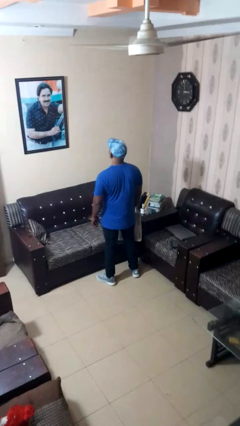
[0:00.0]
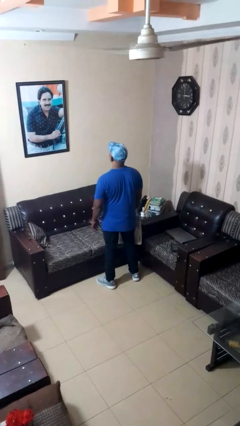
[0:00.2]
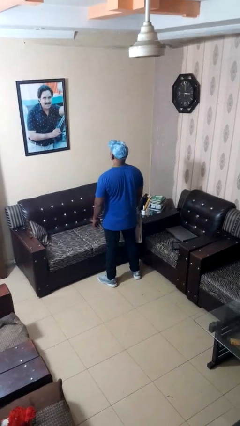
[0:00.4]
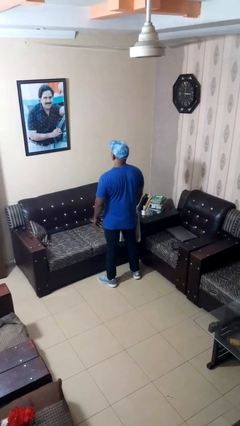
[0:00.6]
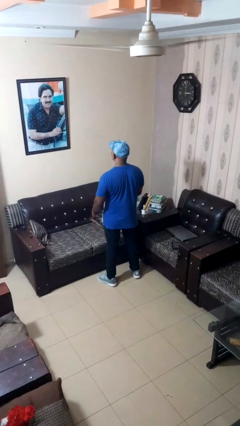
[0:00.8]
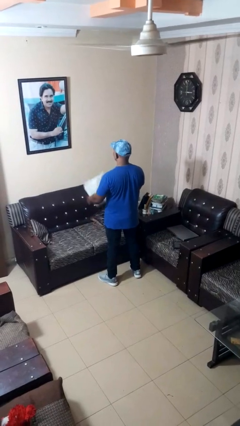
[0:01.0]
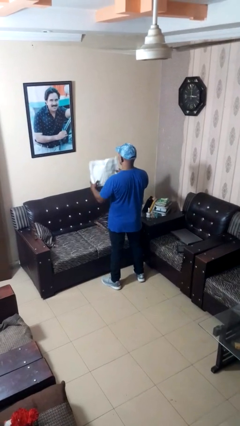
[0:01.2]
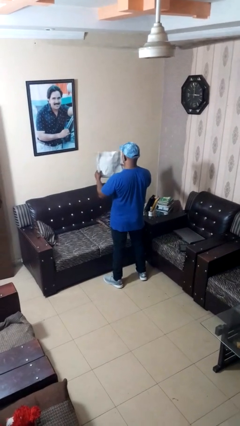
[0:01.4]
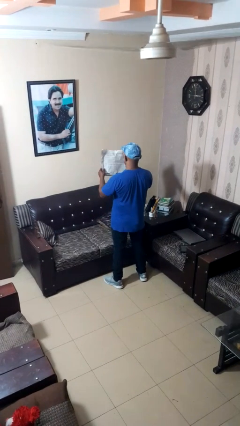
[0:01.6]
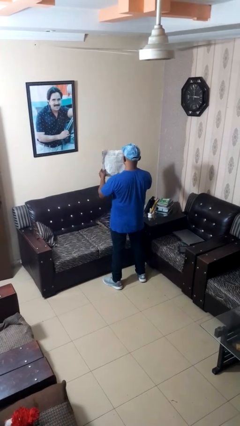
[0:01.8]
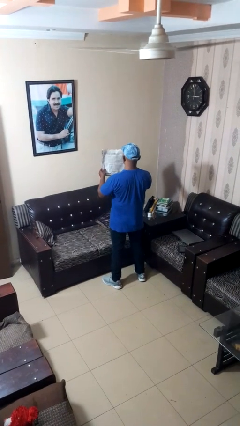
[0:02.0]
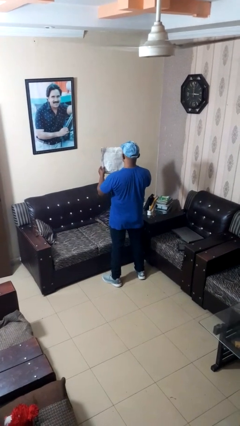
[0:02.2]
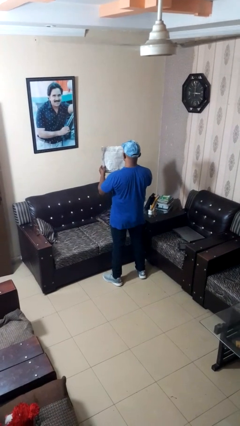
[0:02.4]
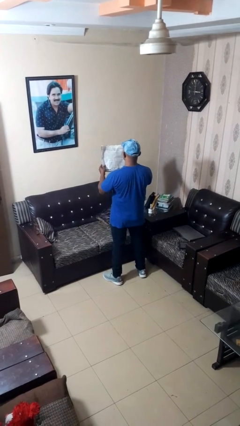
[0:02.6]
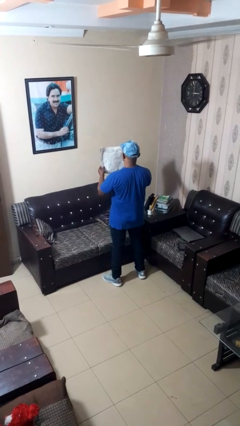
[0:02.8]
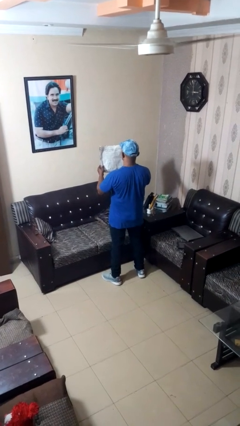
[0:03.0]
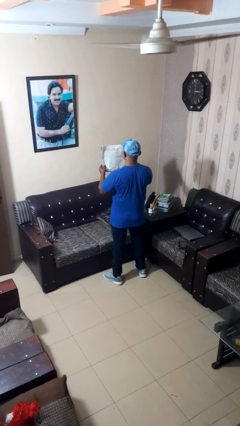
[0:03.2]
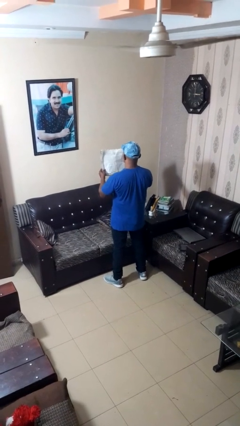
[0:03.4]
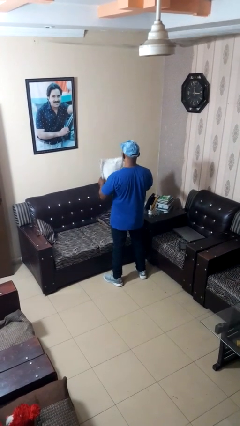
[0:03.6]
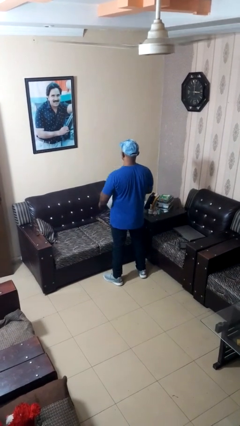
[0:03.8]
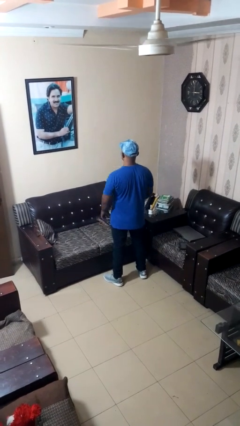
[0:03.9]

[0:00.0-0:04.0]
person reads newspaper

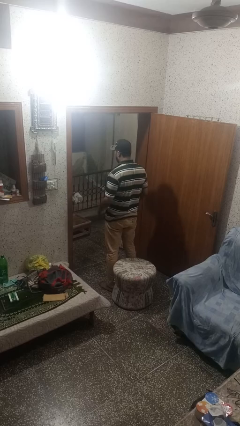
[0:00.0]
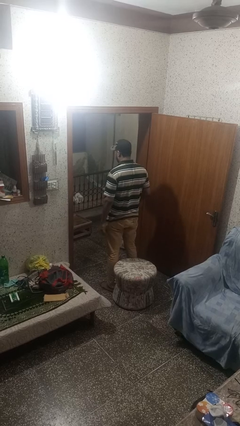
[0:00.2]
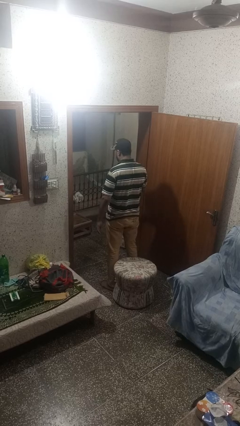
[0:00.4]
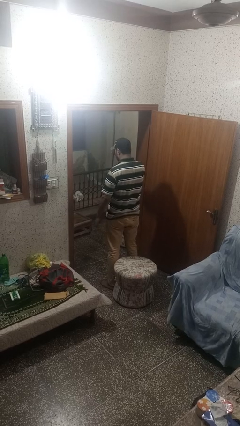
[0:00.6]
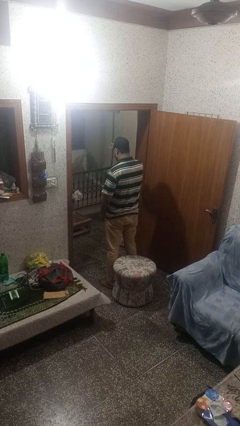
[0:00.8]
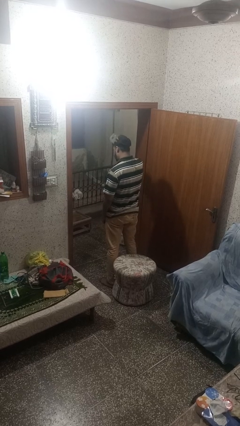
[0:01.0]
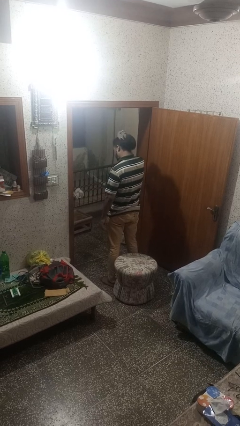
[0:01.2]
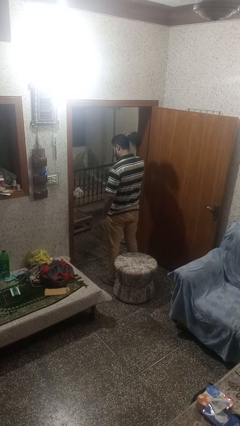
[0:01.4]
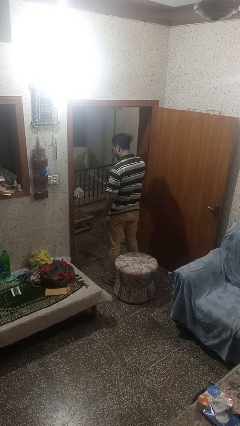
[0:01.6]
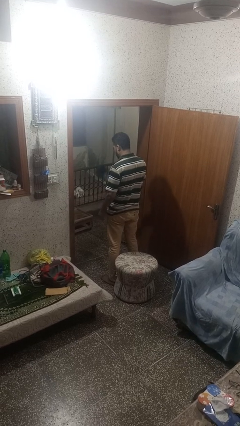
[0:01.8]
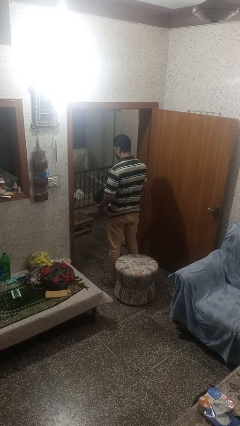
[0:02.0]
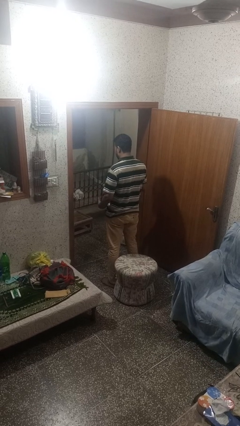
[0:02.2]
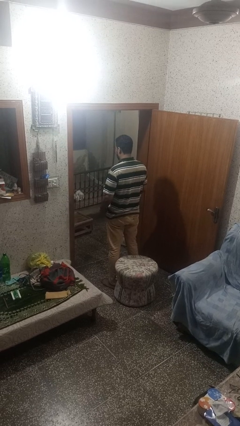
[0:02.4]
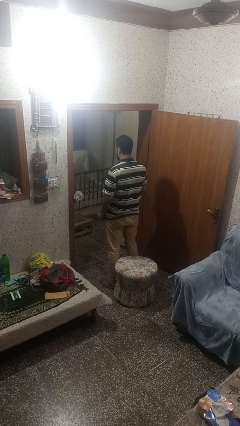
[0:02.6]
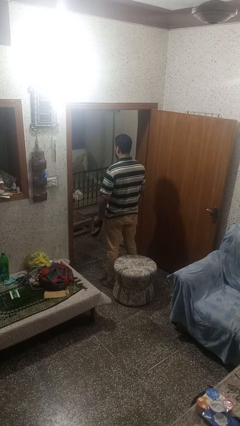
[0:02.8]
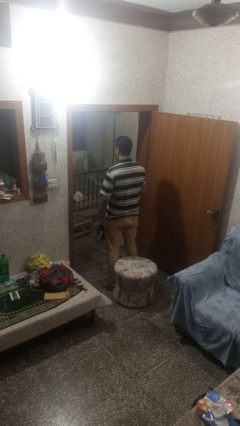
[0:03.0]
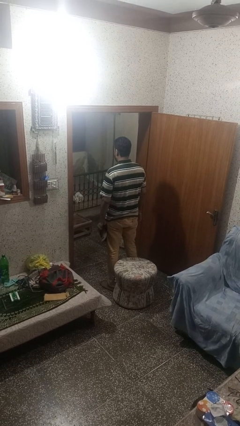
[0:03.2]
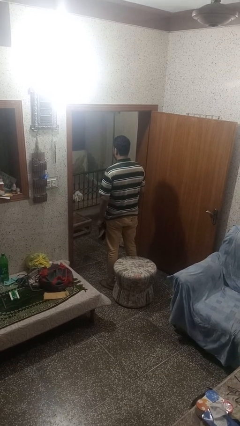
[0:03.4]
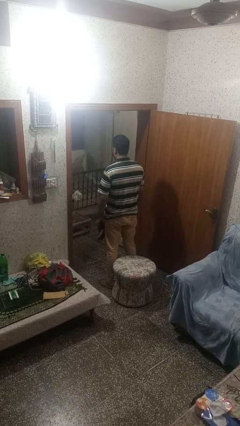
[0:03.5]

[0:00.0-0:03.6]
person takes off hat

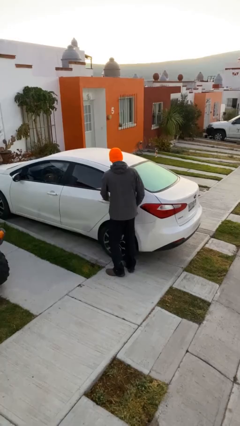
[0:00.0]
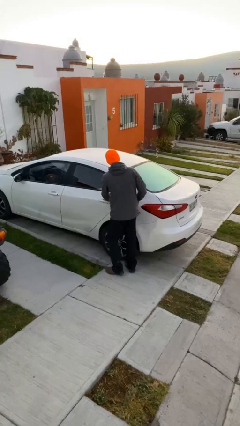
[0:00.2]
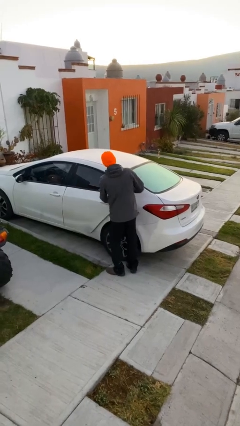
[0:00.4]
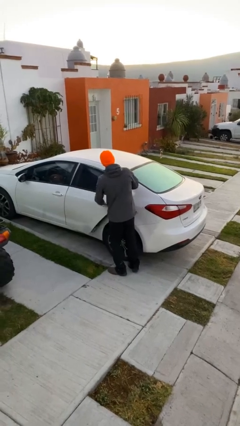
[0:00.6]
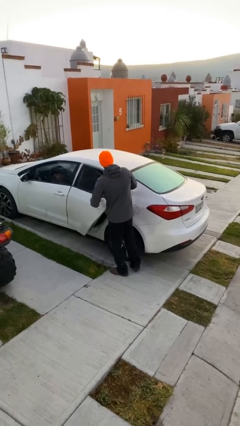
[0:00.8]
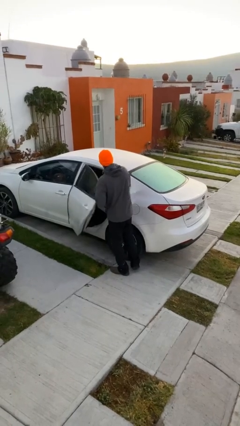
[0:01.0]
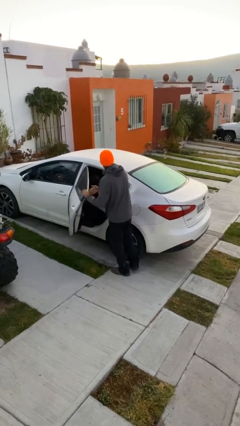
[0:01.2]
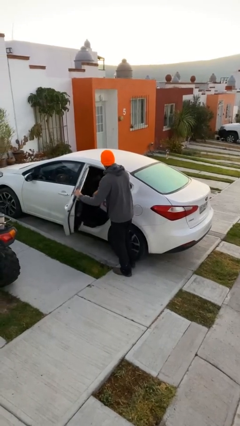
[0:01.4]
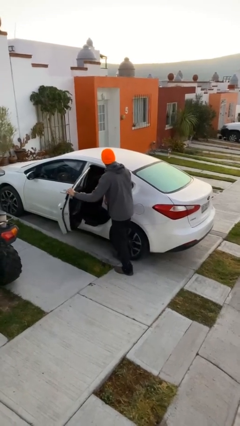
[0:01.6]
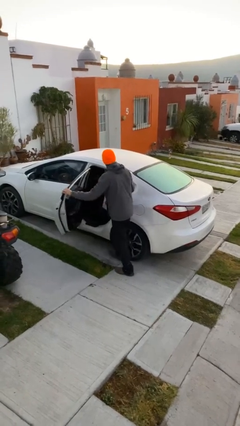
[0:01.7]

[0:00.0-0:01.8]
person opens car door

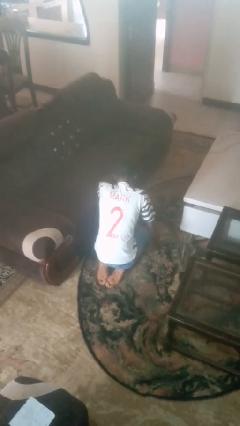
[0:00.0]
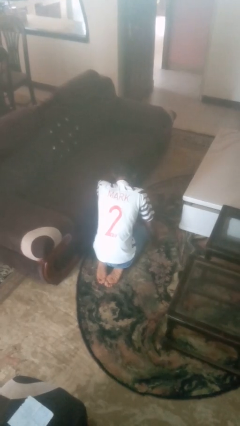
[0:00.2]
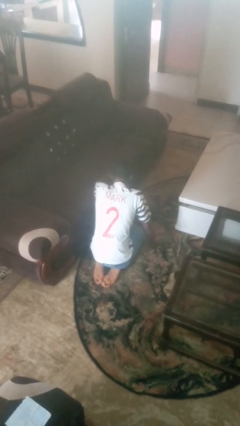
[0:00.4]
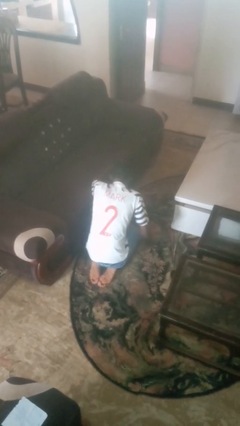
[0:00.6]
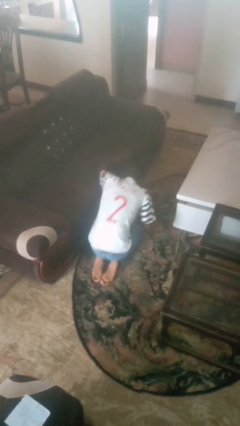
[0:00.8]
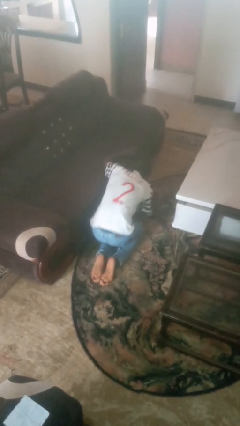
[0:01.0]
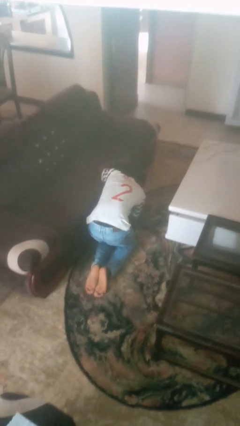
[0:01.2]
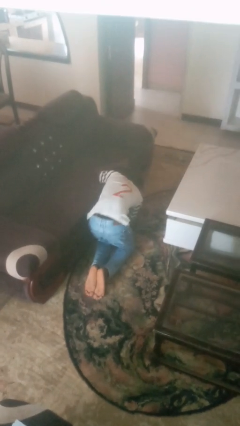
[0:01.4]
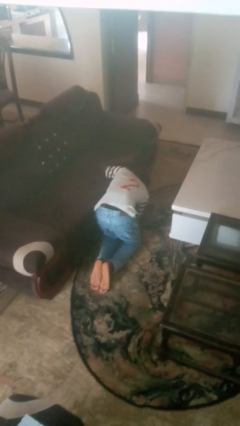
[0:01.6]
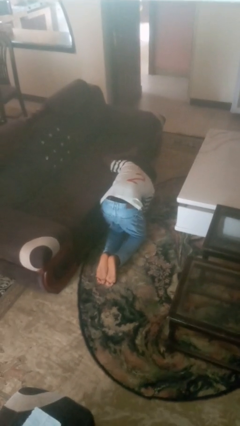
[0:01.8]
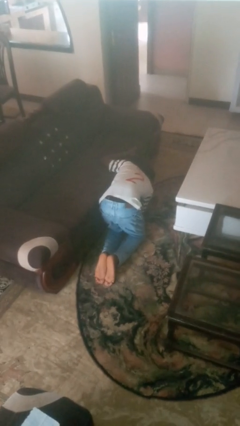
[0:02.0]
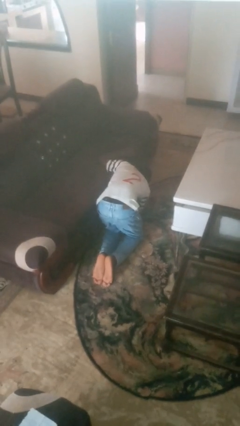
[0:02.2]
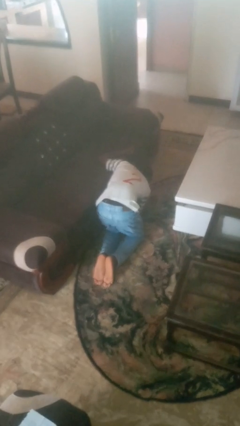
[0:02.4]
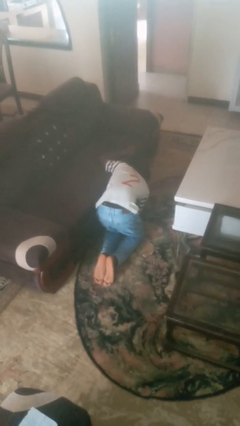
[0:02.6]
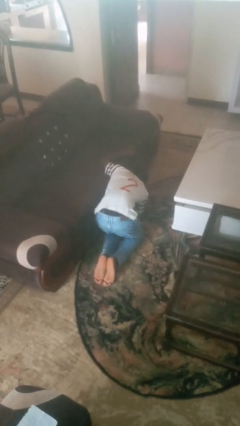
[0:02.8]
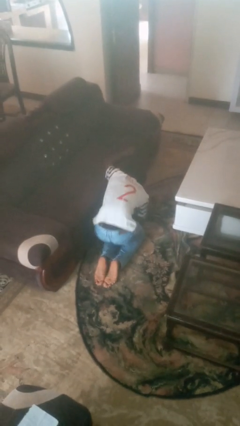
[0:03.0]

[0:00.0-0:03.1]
person searches under couch

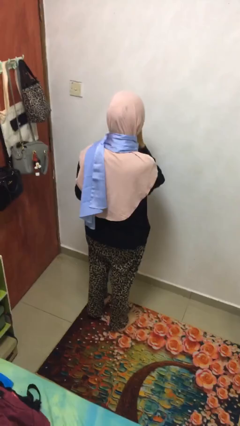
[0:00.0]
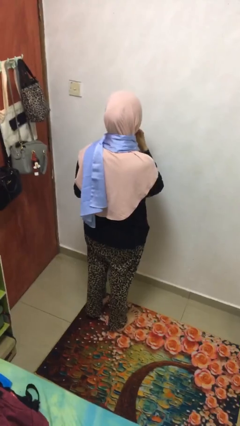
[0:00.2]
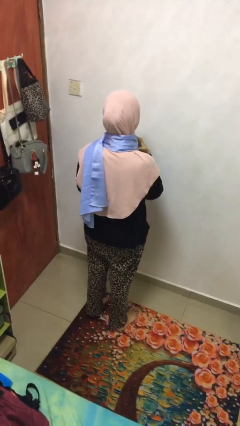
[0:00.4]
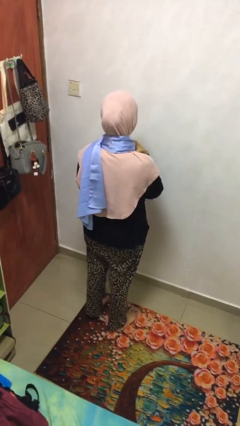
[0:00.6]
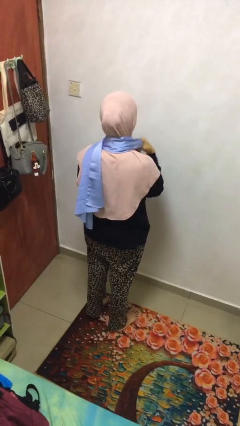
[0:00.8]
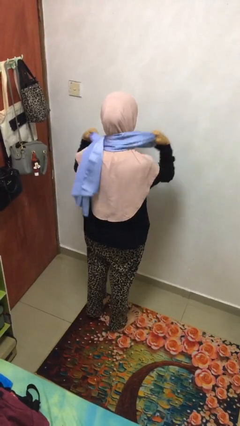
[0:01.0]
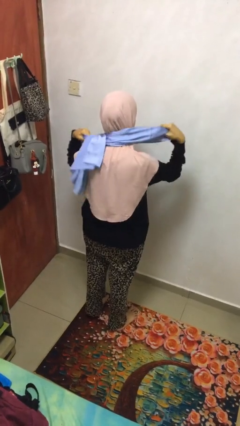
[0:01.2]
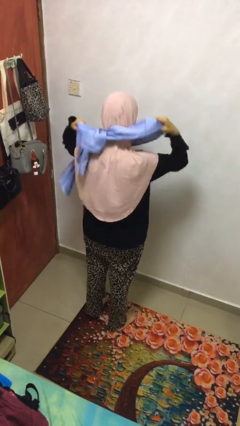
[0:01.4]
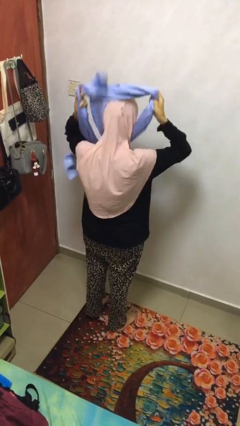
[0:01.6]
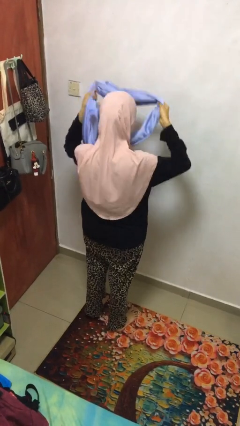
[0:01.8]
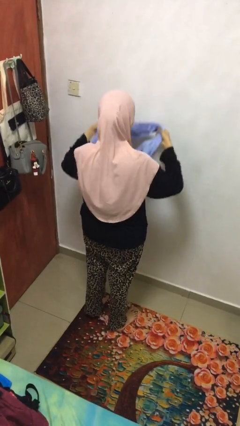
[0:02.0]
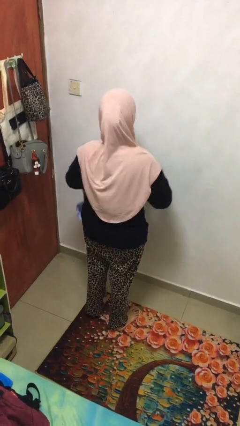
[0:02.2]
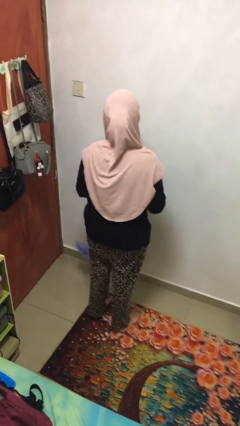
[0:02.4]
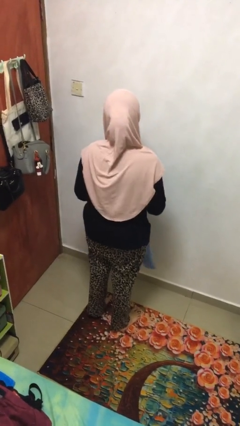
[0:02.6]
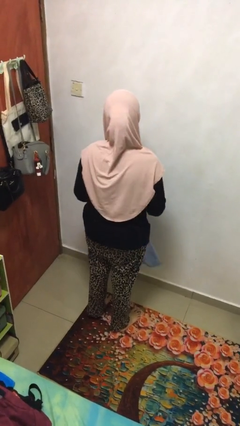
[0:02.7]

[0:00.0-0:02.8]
person takes off scarf

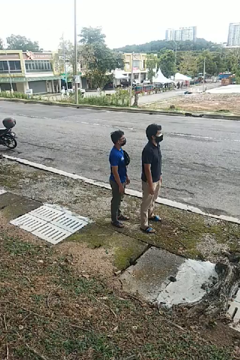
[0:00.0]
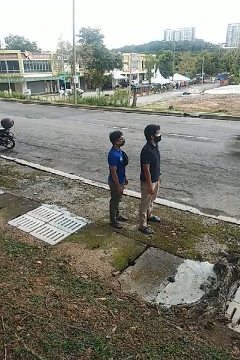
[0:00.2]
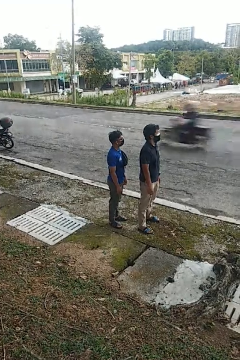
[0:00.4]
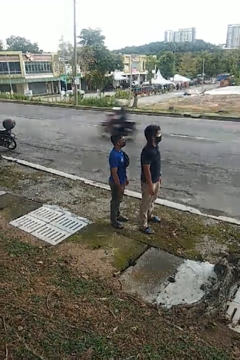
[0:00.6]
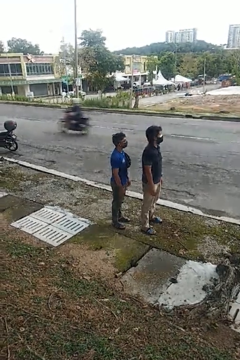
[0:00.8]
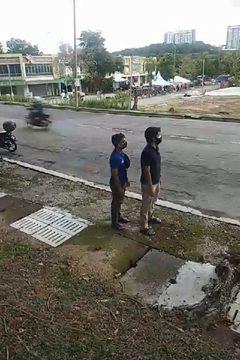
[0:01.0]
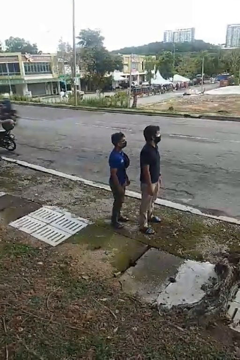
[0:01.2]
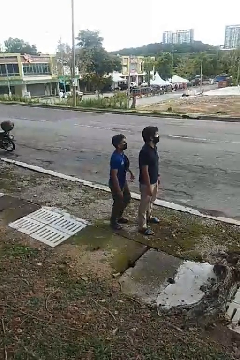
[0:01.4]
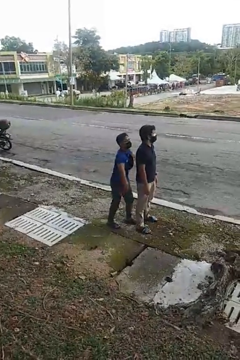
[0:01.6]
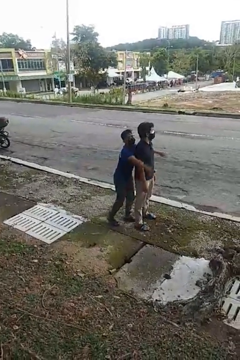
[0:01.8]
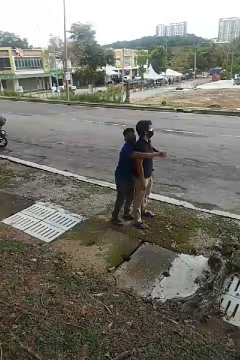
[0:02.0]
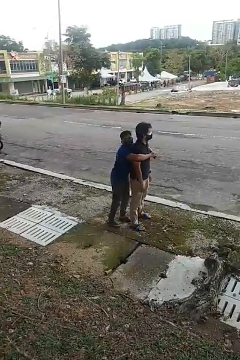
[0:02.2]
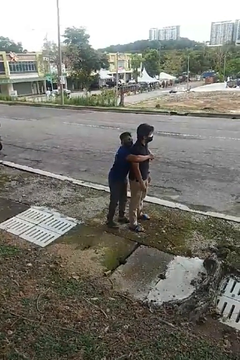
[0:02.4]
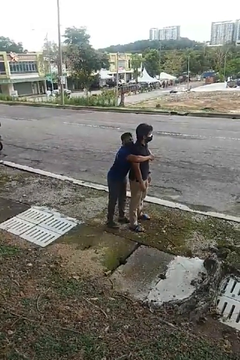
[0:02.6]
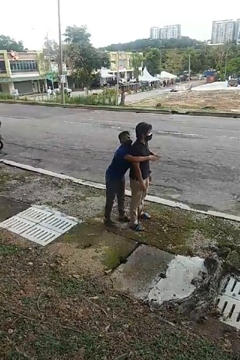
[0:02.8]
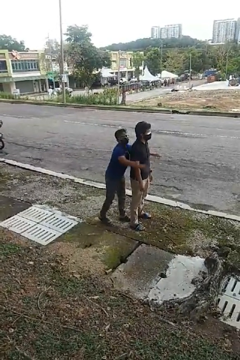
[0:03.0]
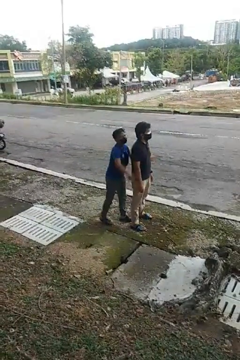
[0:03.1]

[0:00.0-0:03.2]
person hugs person from behind
